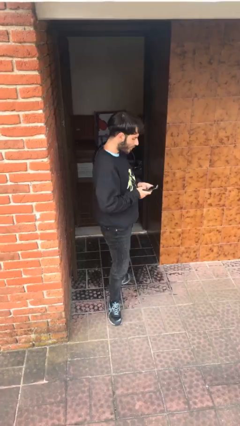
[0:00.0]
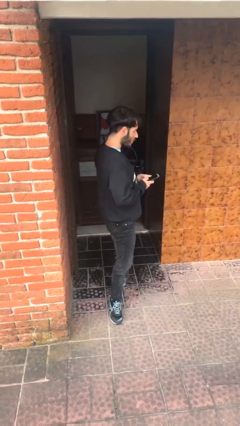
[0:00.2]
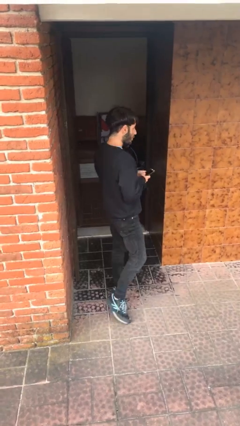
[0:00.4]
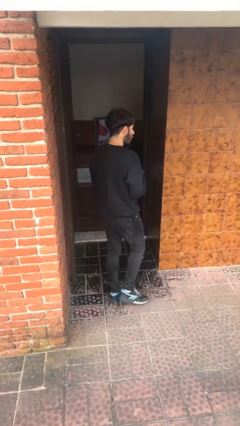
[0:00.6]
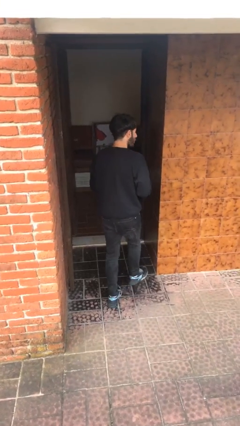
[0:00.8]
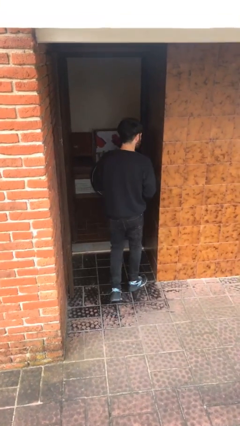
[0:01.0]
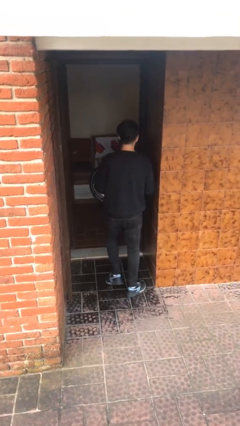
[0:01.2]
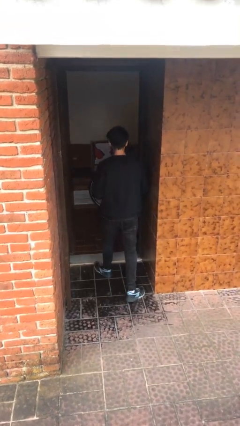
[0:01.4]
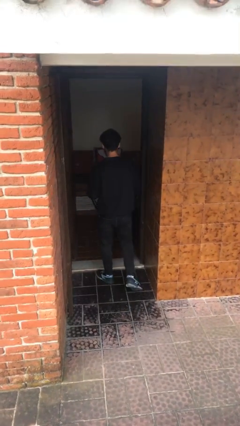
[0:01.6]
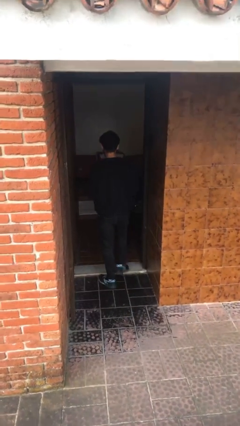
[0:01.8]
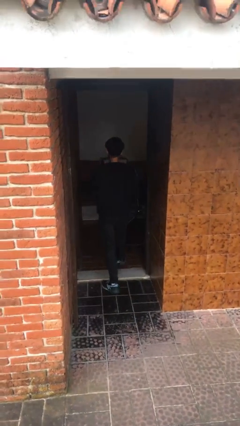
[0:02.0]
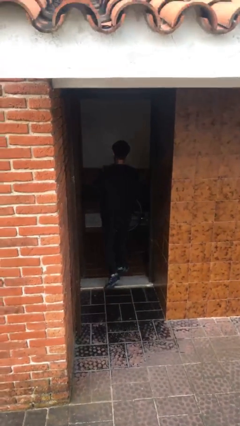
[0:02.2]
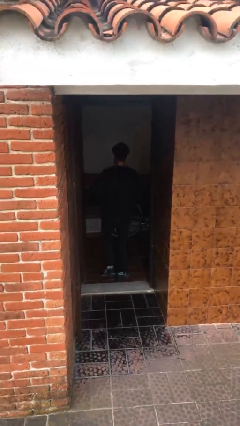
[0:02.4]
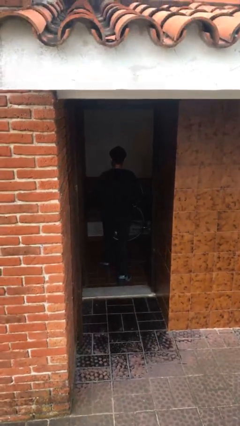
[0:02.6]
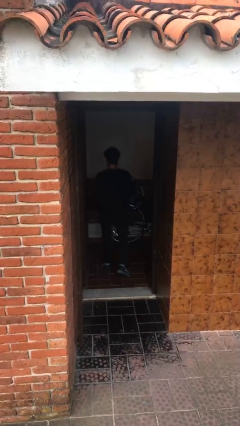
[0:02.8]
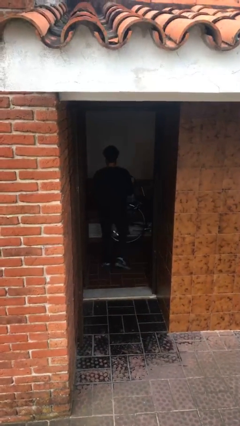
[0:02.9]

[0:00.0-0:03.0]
person exits scene through structure

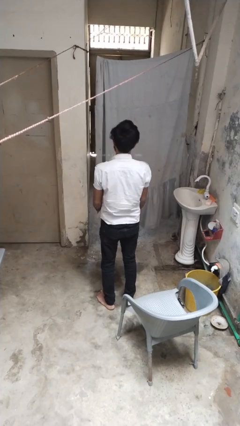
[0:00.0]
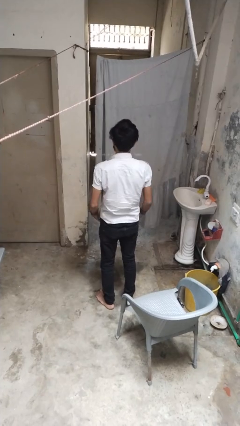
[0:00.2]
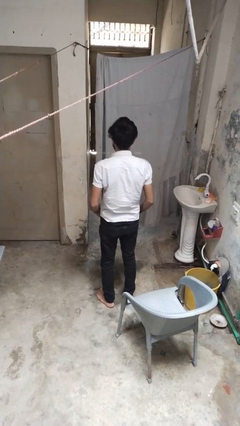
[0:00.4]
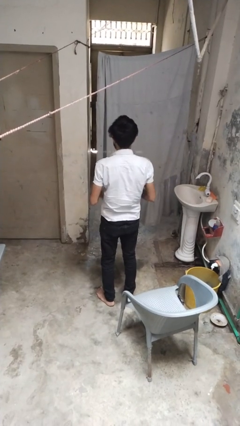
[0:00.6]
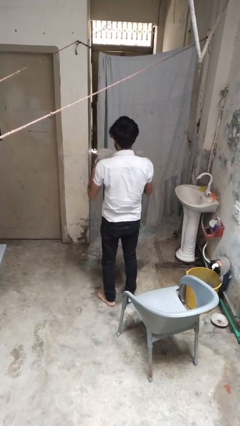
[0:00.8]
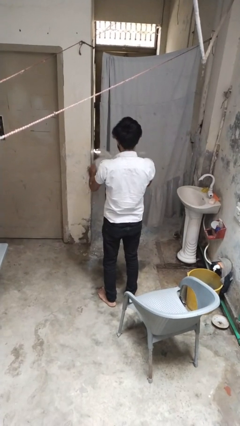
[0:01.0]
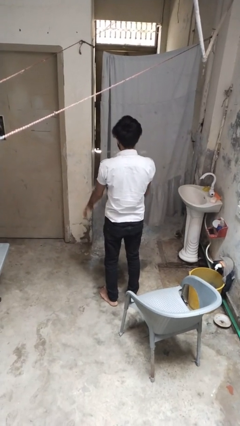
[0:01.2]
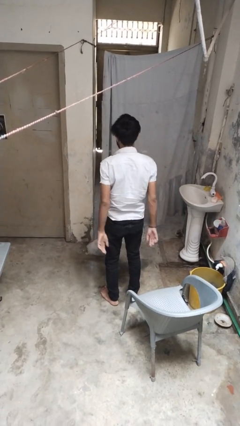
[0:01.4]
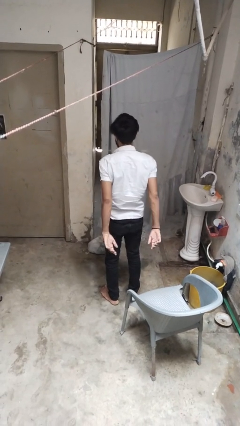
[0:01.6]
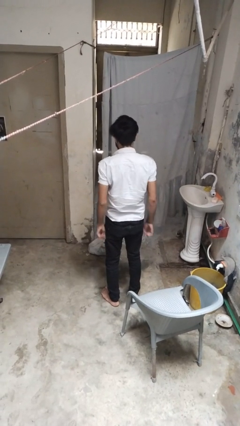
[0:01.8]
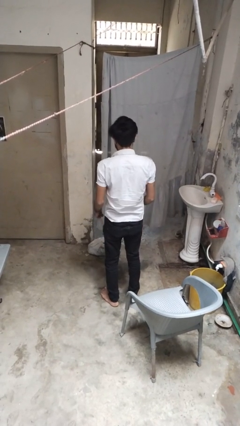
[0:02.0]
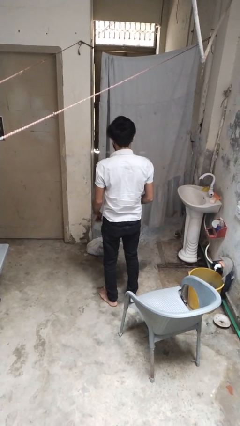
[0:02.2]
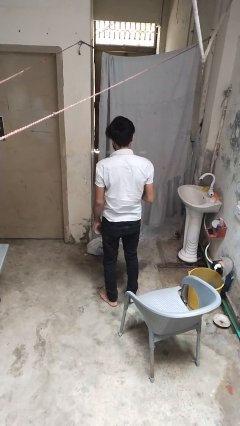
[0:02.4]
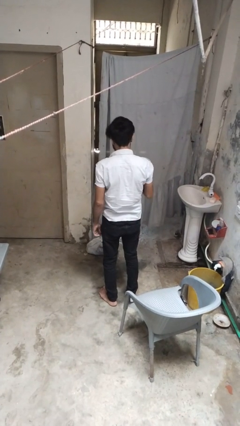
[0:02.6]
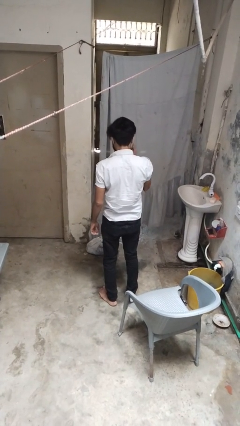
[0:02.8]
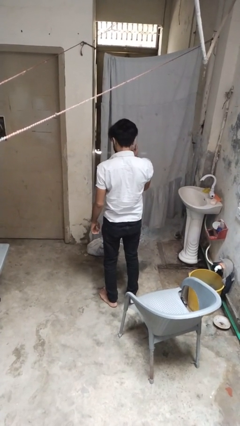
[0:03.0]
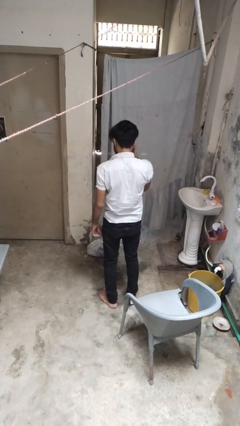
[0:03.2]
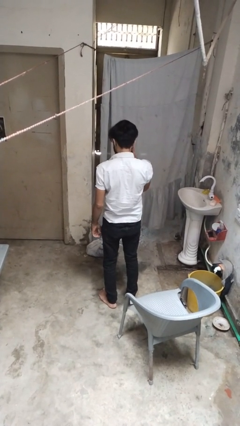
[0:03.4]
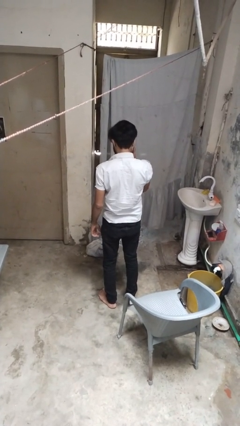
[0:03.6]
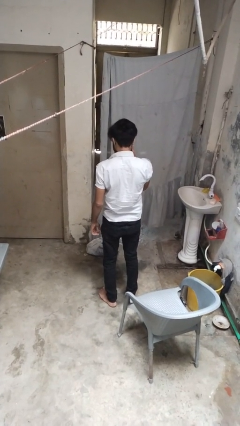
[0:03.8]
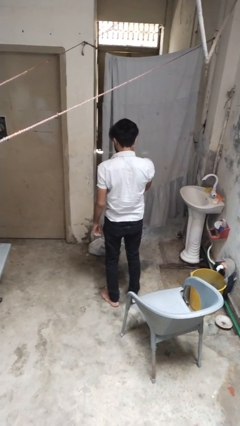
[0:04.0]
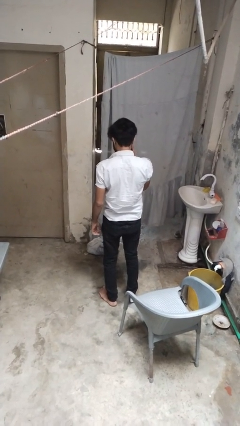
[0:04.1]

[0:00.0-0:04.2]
person throws object to ground

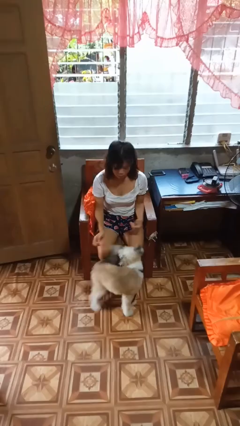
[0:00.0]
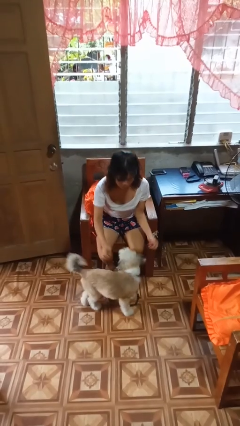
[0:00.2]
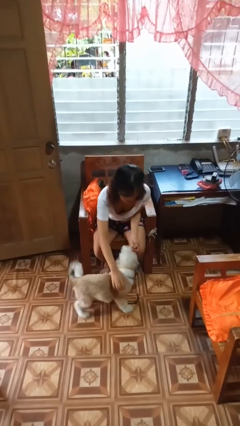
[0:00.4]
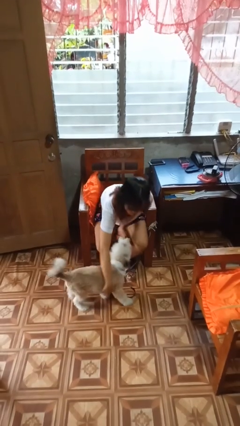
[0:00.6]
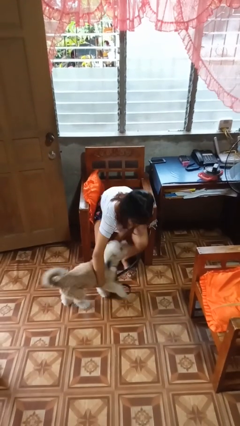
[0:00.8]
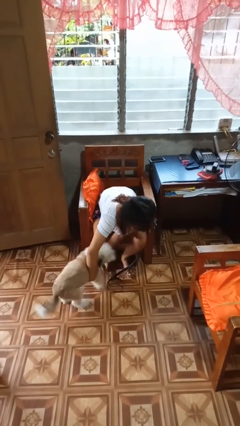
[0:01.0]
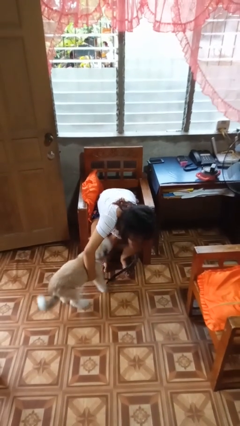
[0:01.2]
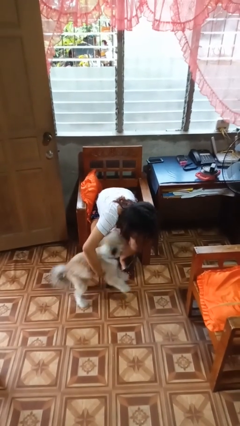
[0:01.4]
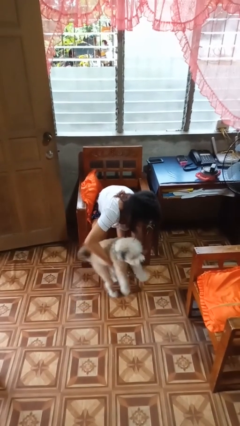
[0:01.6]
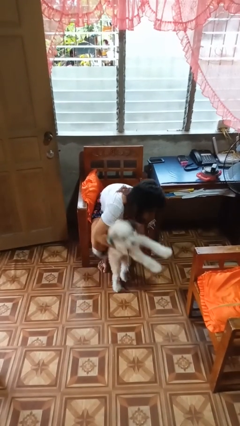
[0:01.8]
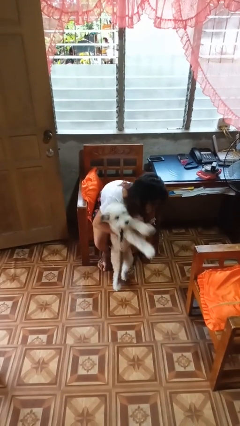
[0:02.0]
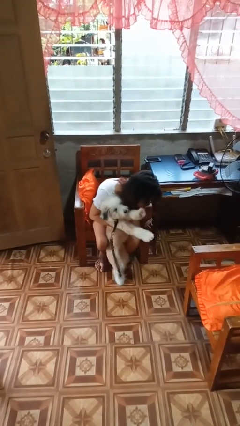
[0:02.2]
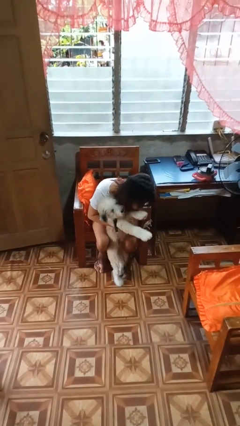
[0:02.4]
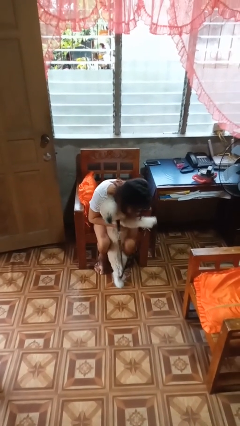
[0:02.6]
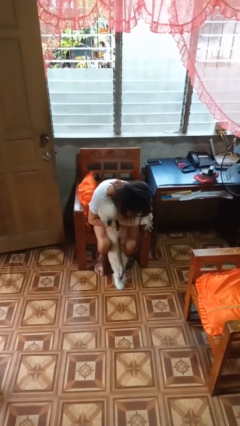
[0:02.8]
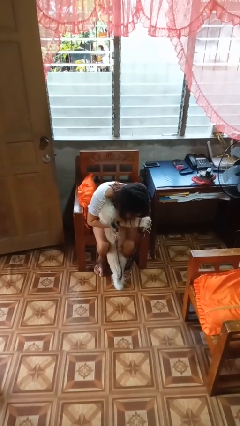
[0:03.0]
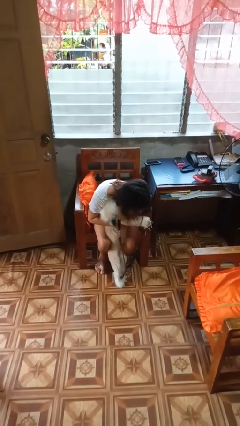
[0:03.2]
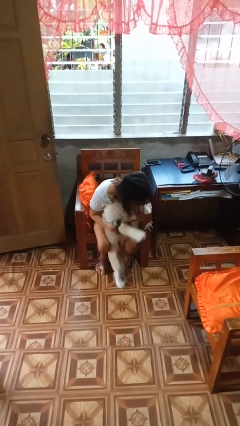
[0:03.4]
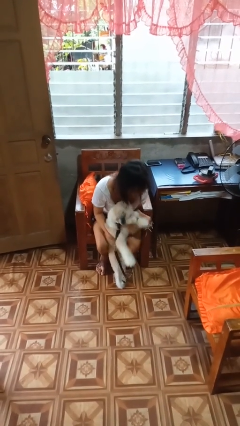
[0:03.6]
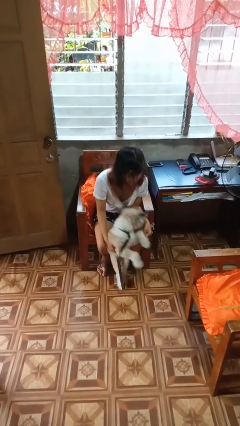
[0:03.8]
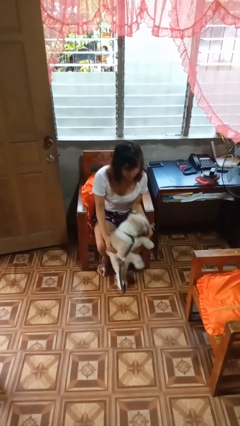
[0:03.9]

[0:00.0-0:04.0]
person hugs dog

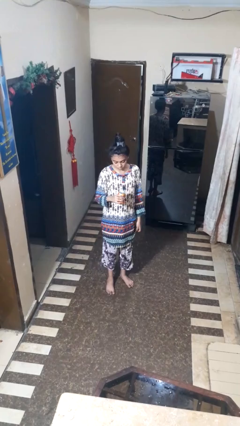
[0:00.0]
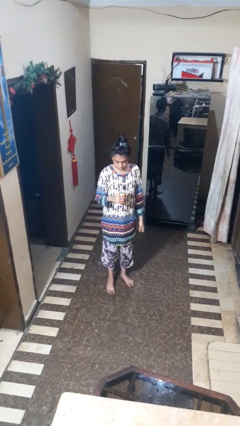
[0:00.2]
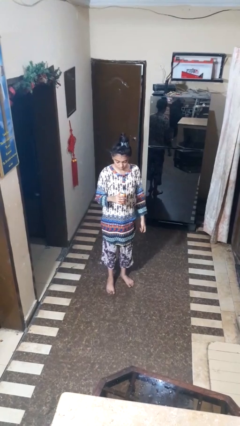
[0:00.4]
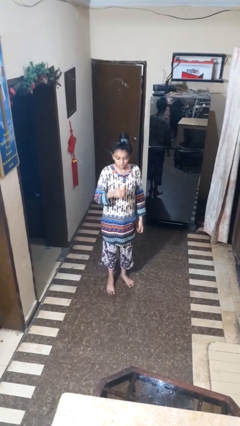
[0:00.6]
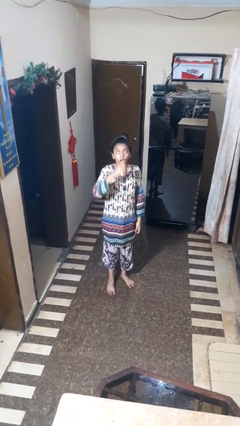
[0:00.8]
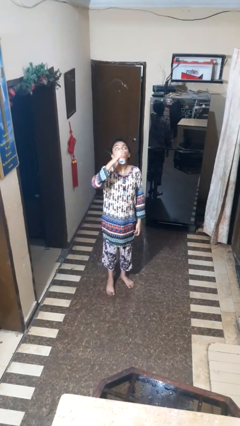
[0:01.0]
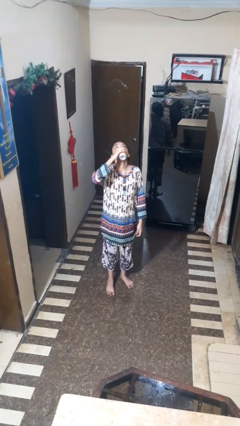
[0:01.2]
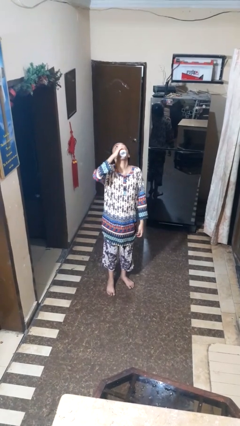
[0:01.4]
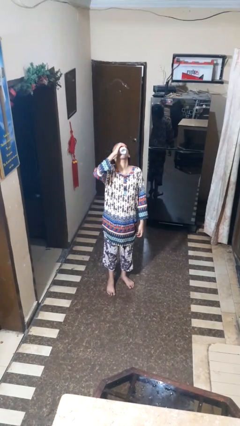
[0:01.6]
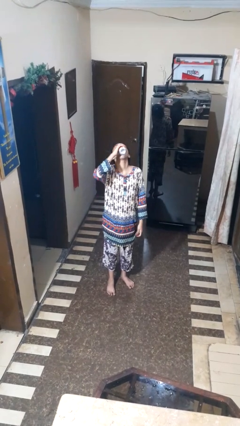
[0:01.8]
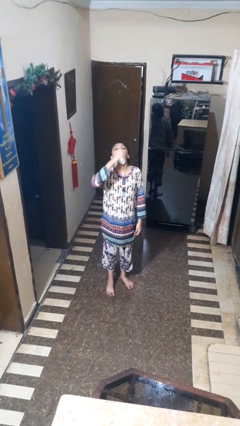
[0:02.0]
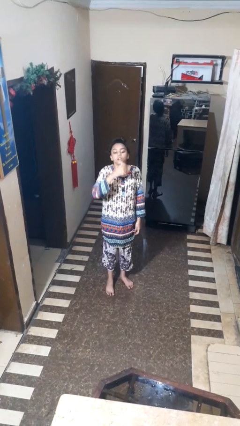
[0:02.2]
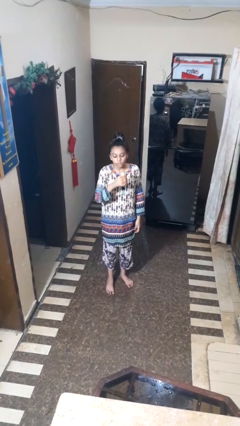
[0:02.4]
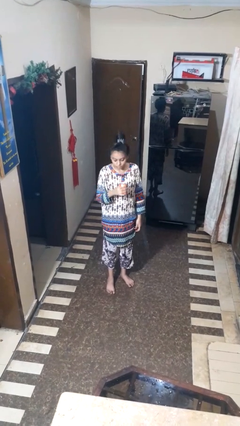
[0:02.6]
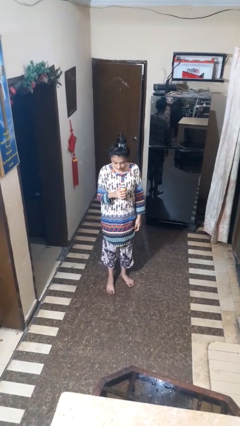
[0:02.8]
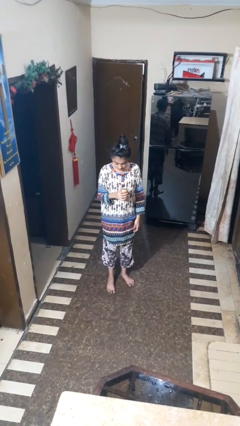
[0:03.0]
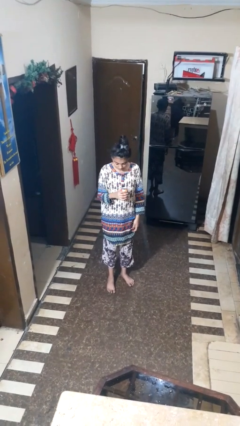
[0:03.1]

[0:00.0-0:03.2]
person drinks from beverage can

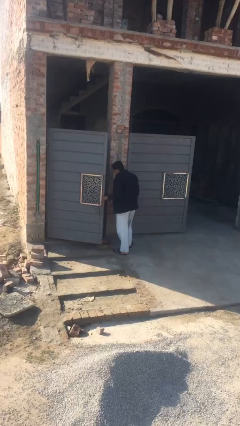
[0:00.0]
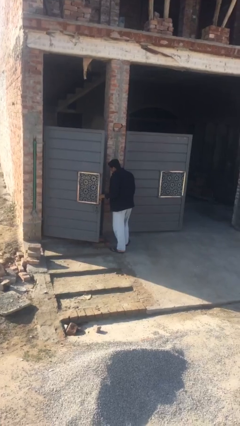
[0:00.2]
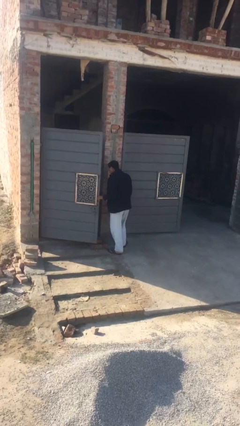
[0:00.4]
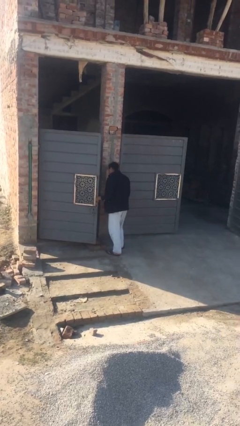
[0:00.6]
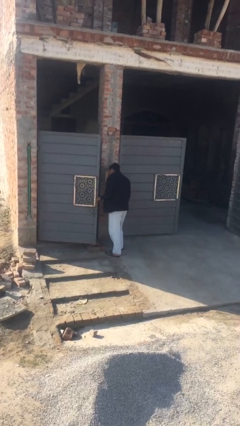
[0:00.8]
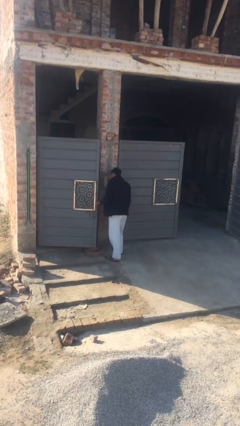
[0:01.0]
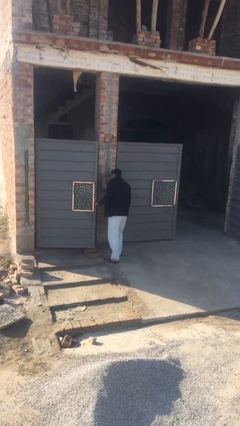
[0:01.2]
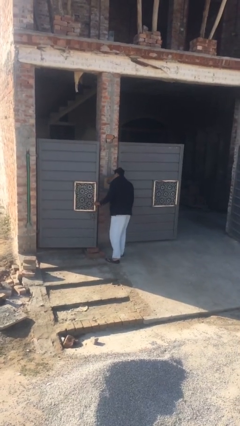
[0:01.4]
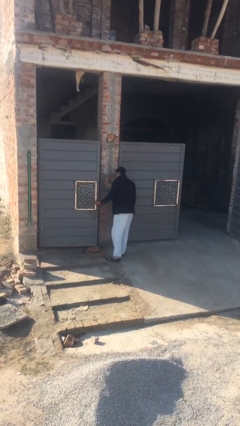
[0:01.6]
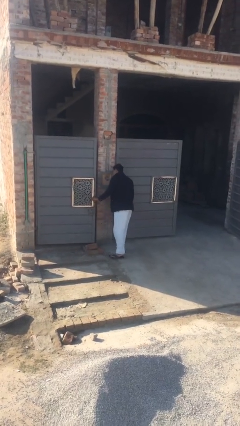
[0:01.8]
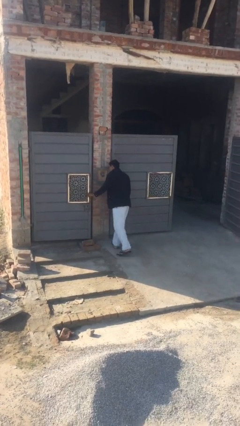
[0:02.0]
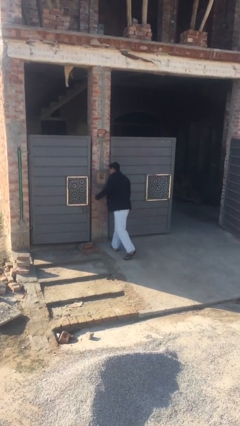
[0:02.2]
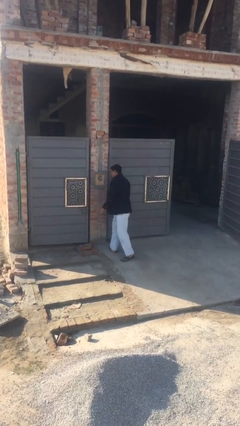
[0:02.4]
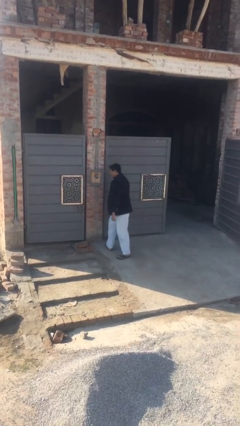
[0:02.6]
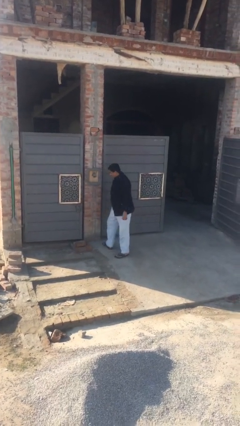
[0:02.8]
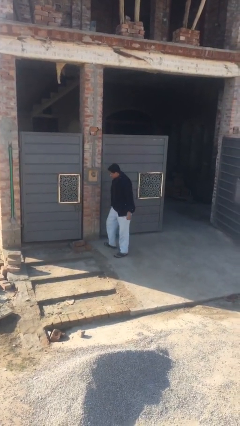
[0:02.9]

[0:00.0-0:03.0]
person closes facility door
